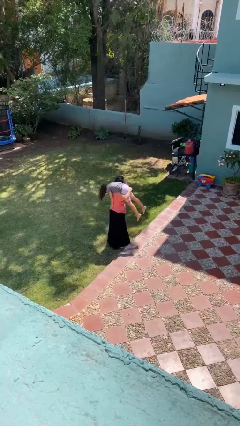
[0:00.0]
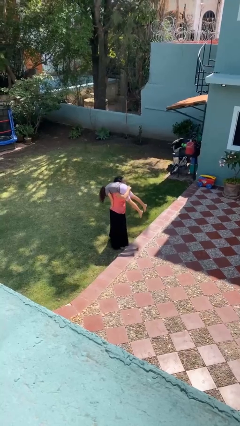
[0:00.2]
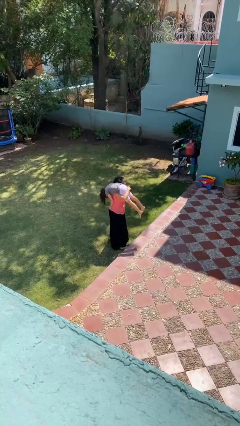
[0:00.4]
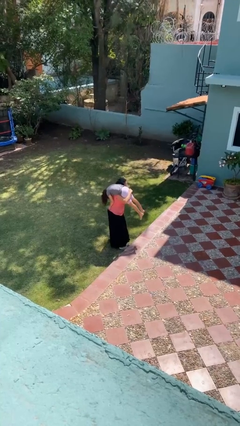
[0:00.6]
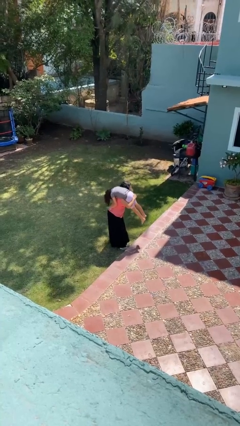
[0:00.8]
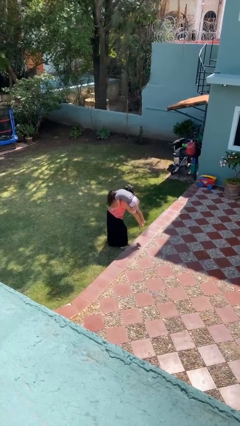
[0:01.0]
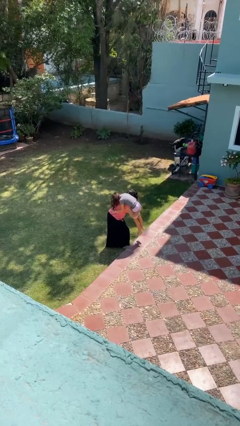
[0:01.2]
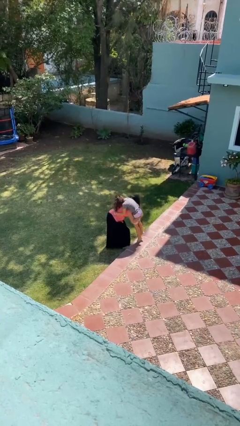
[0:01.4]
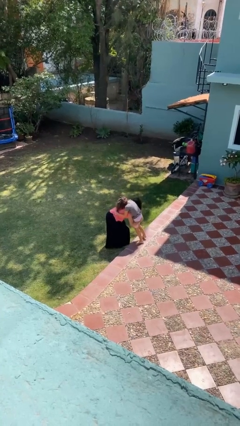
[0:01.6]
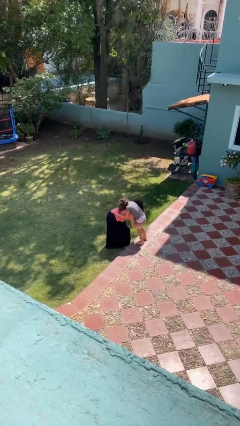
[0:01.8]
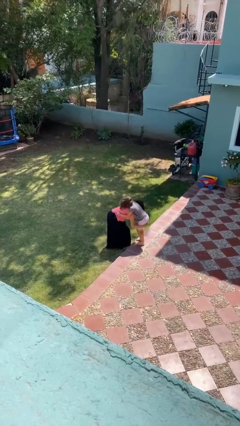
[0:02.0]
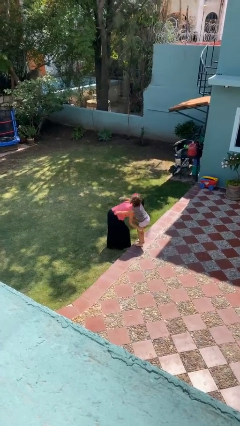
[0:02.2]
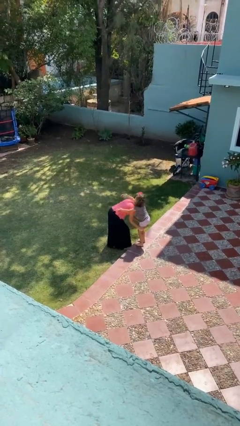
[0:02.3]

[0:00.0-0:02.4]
person puts down person

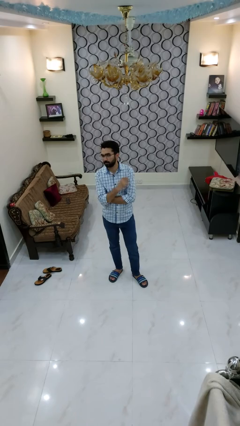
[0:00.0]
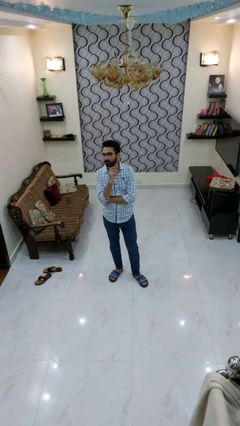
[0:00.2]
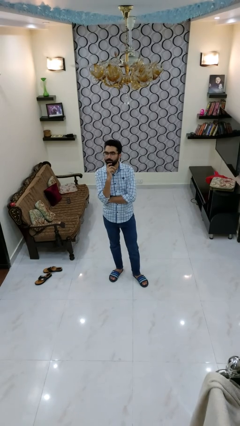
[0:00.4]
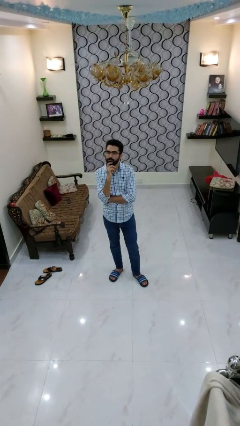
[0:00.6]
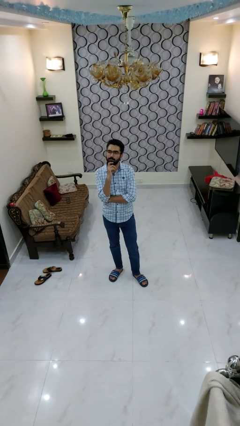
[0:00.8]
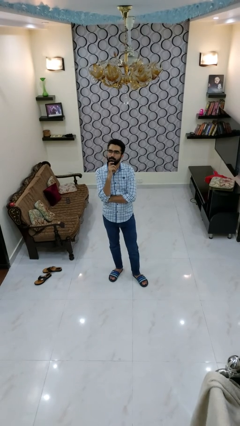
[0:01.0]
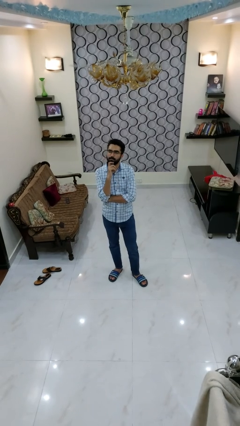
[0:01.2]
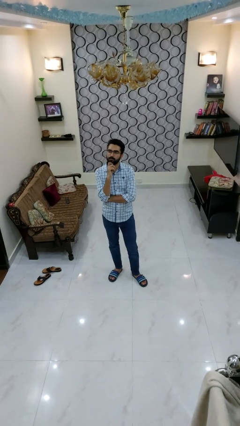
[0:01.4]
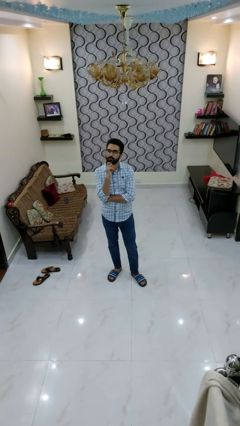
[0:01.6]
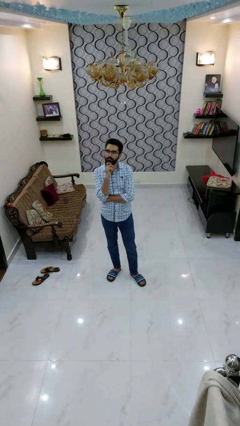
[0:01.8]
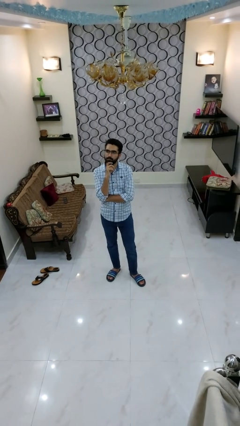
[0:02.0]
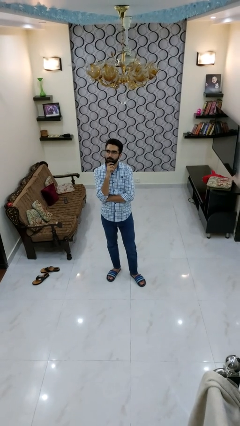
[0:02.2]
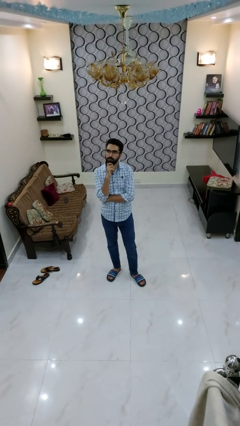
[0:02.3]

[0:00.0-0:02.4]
person strokes chin

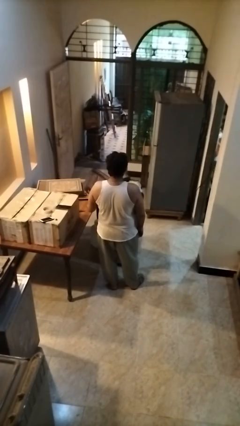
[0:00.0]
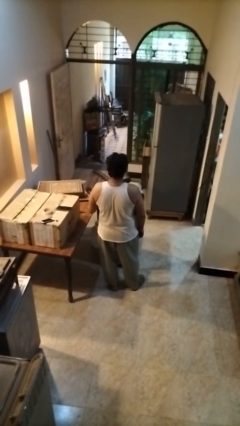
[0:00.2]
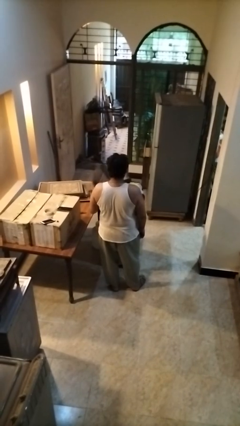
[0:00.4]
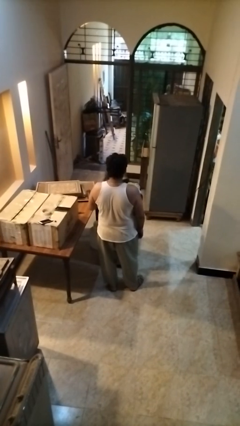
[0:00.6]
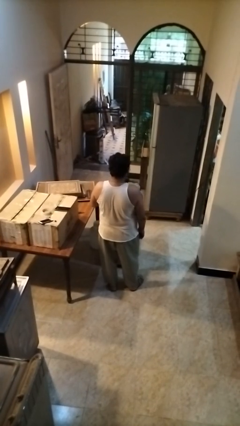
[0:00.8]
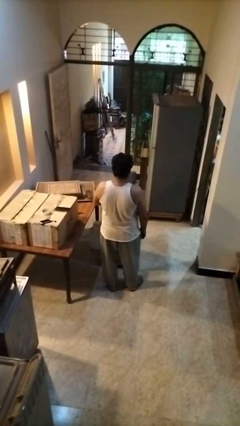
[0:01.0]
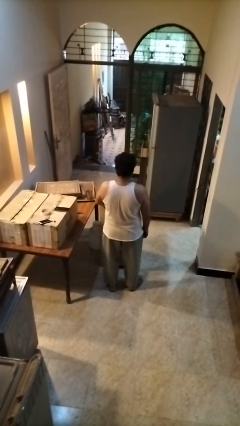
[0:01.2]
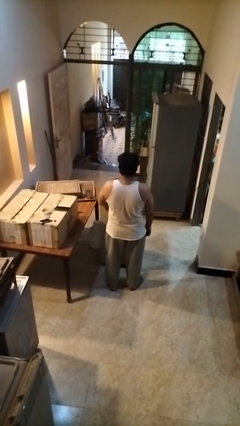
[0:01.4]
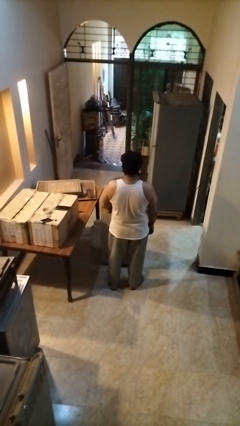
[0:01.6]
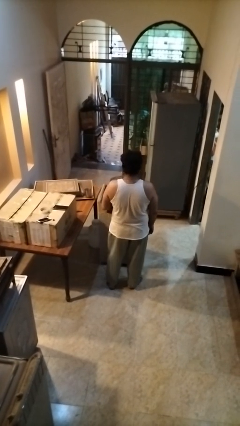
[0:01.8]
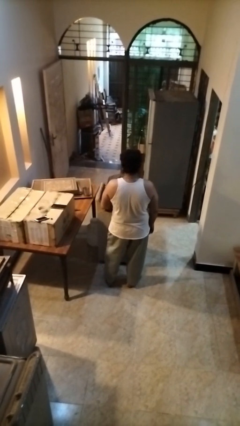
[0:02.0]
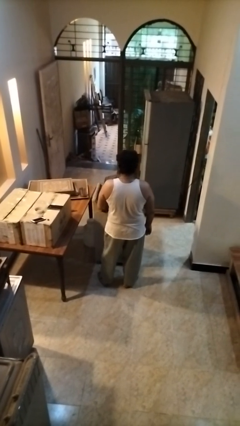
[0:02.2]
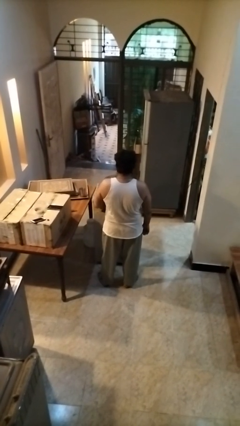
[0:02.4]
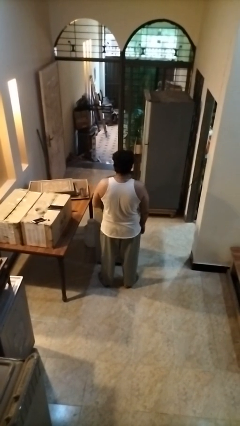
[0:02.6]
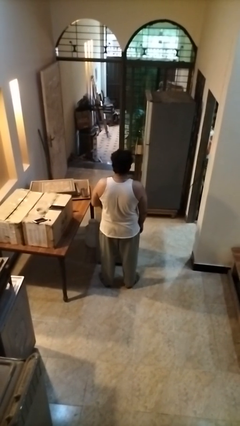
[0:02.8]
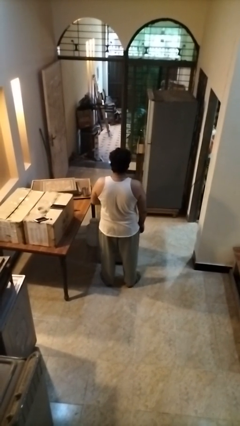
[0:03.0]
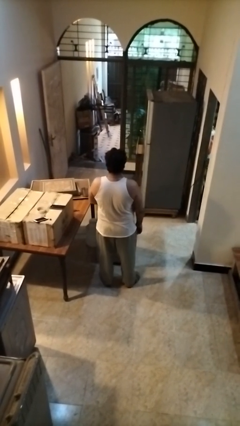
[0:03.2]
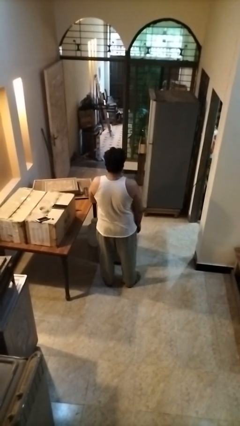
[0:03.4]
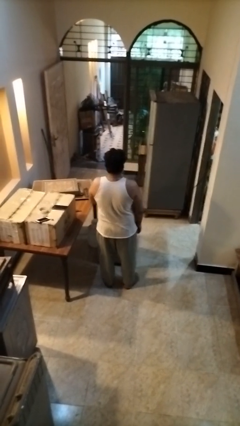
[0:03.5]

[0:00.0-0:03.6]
person closes suitcase

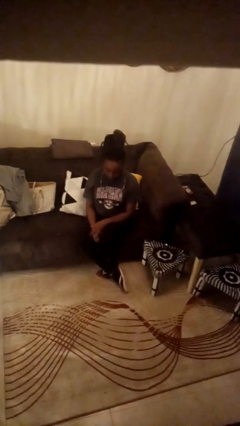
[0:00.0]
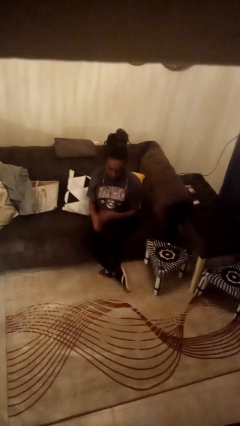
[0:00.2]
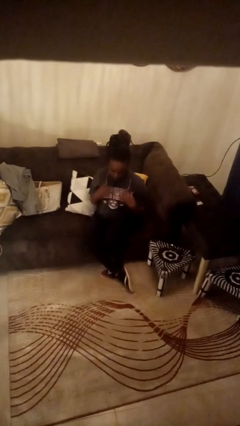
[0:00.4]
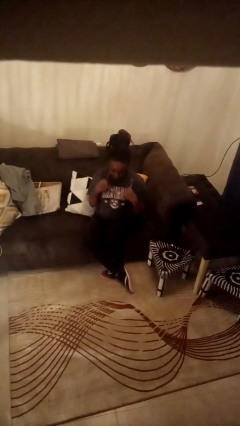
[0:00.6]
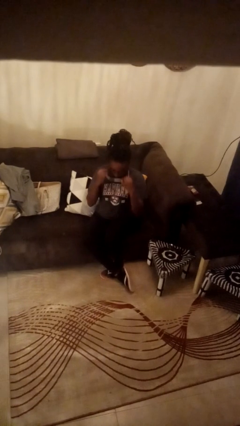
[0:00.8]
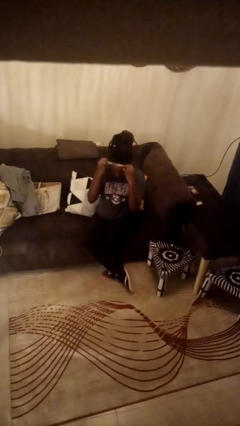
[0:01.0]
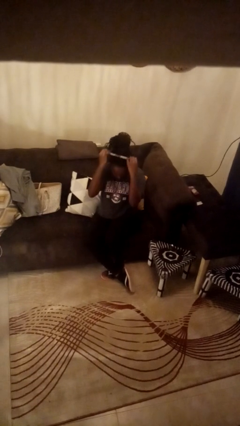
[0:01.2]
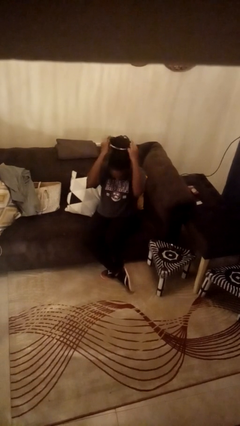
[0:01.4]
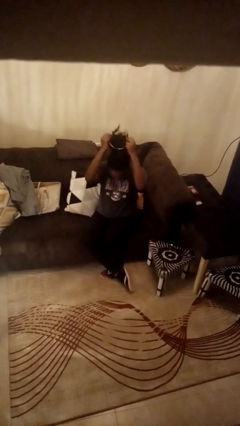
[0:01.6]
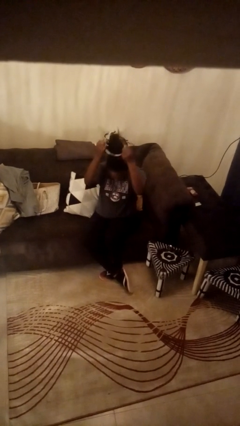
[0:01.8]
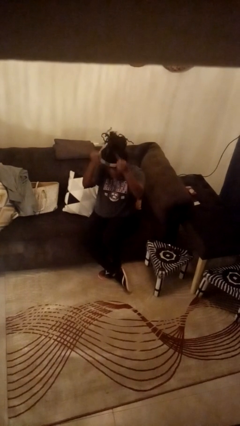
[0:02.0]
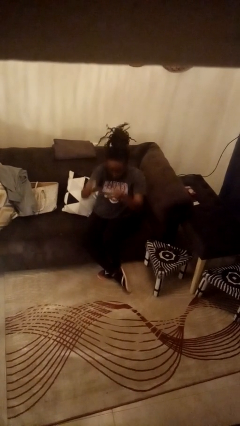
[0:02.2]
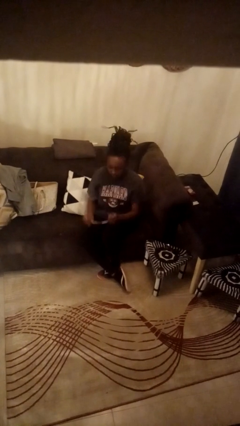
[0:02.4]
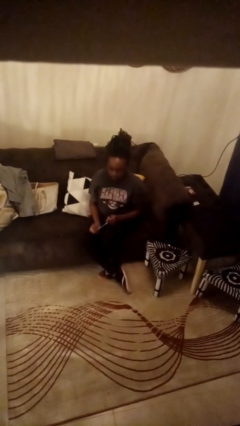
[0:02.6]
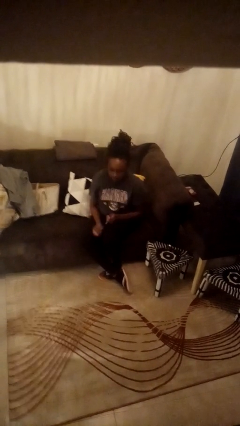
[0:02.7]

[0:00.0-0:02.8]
person takes off necklace

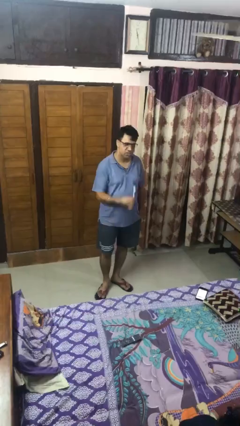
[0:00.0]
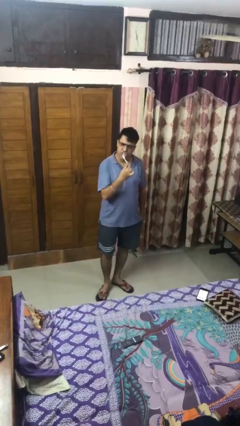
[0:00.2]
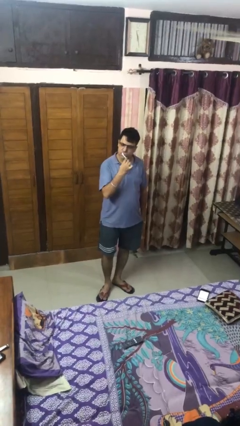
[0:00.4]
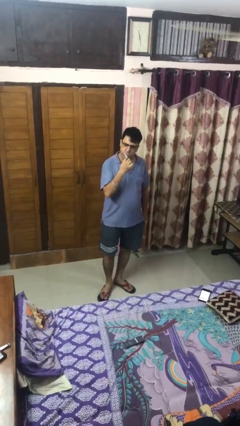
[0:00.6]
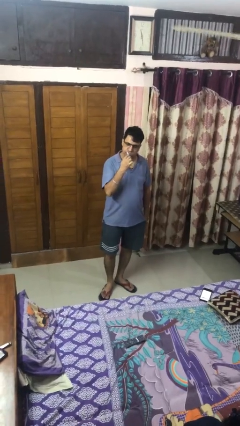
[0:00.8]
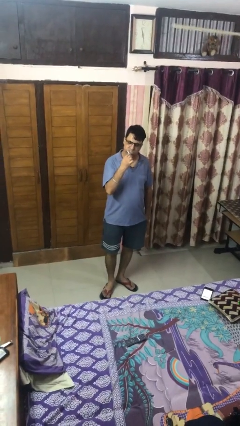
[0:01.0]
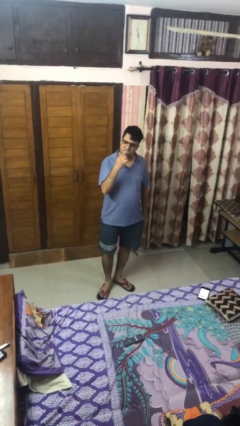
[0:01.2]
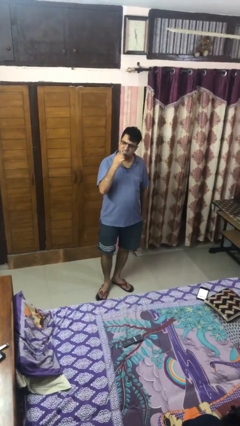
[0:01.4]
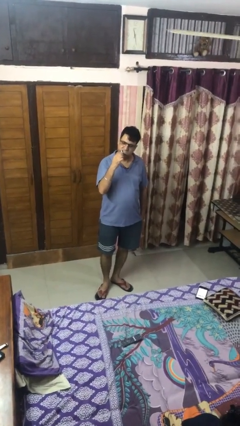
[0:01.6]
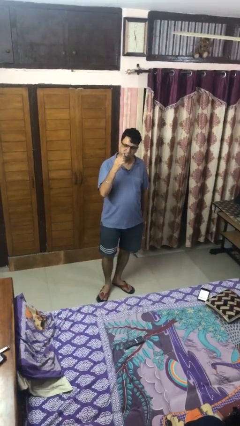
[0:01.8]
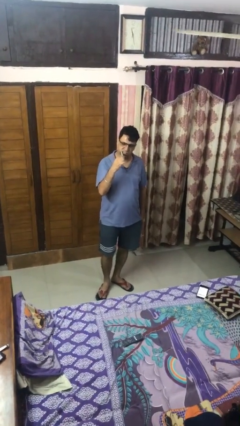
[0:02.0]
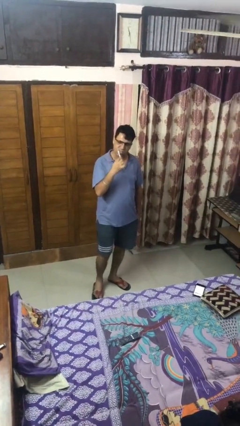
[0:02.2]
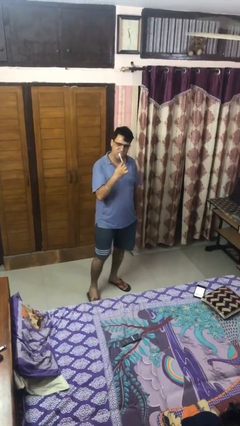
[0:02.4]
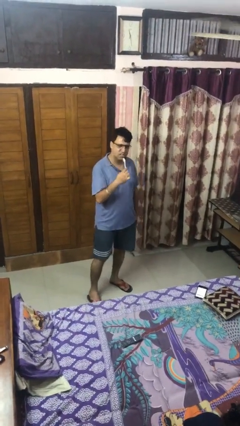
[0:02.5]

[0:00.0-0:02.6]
person brushes teeth

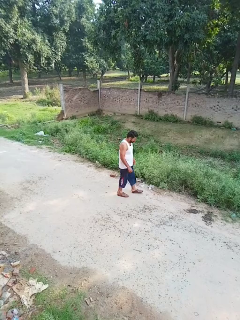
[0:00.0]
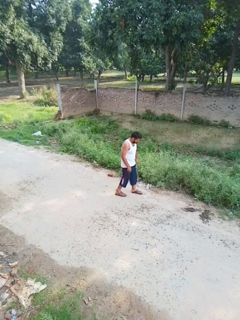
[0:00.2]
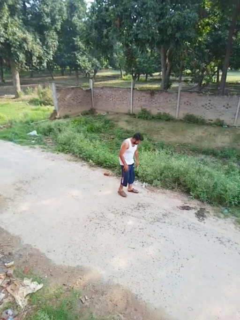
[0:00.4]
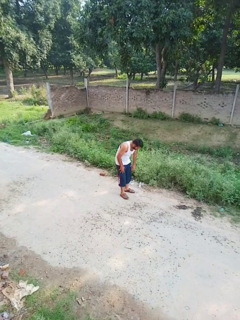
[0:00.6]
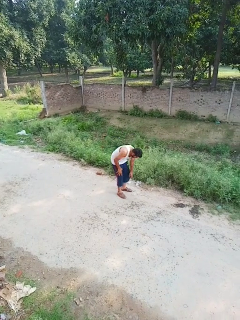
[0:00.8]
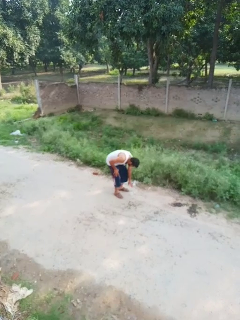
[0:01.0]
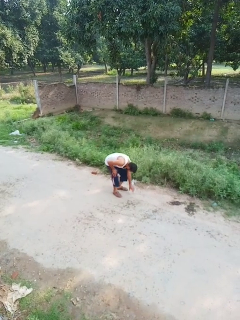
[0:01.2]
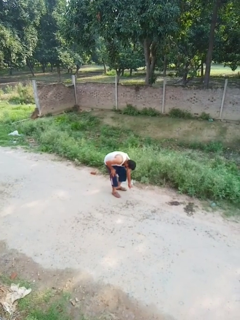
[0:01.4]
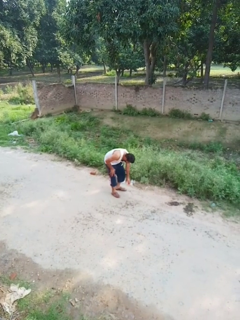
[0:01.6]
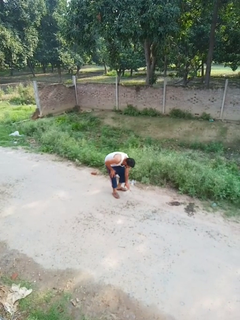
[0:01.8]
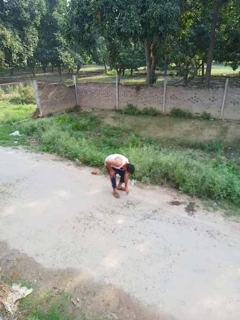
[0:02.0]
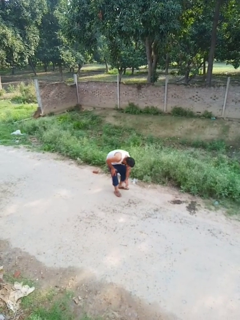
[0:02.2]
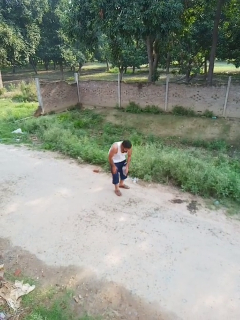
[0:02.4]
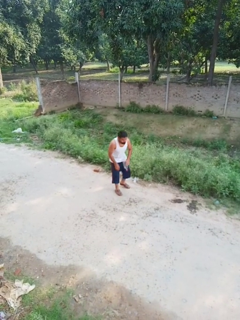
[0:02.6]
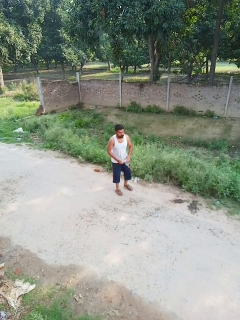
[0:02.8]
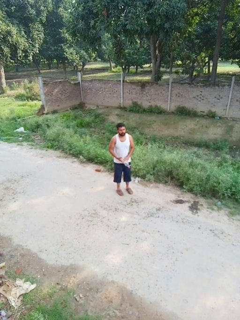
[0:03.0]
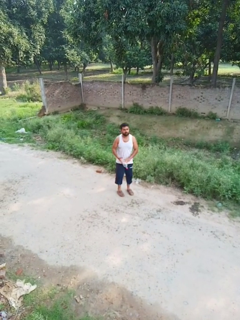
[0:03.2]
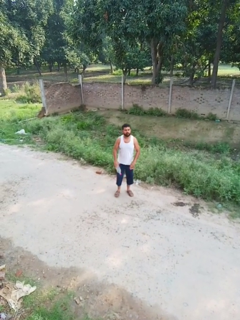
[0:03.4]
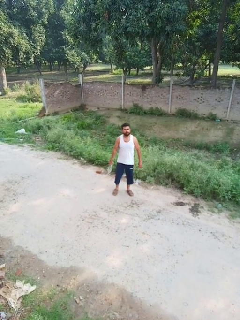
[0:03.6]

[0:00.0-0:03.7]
person picks up object from floor

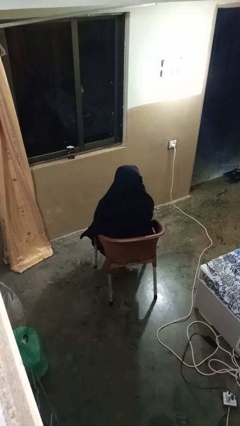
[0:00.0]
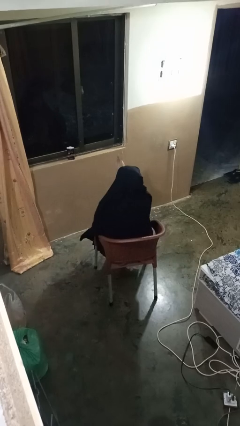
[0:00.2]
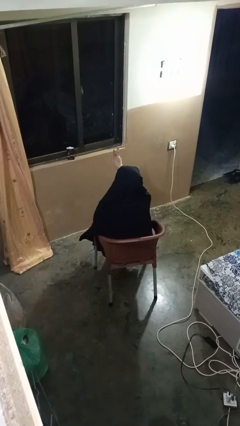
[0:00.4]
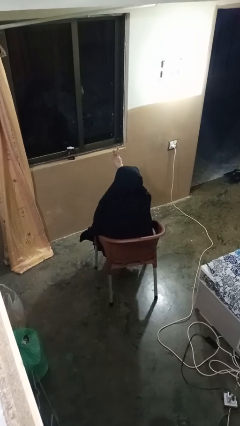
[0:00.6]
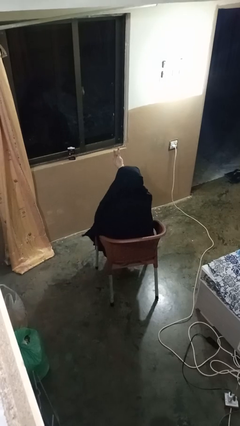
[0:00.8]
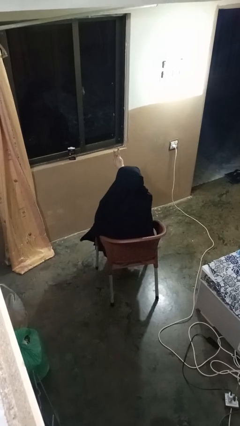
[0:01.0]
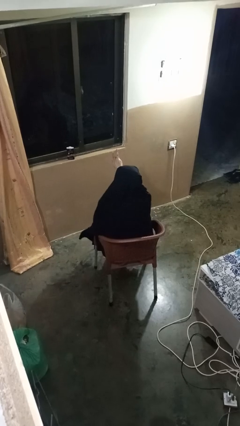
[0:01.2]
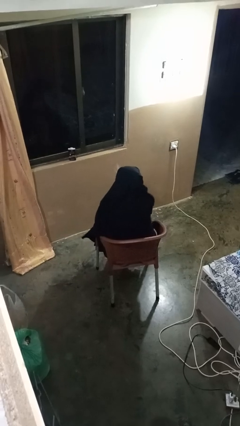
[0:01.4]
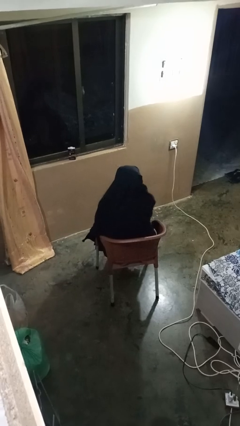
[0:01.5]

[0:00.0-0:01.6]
person gestures peace
